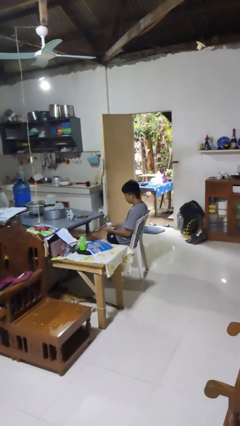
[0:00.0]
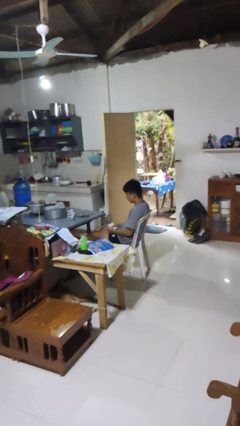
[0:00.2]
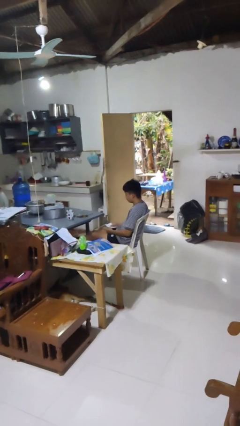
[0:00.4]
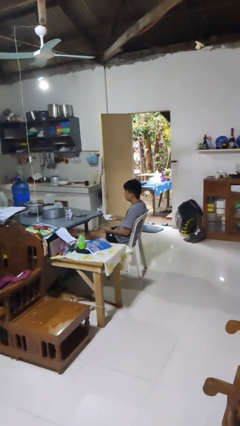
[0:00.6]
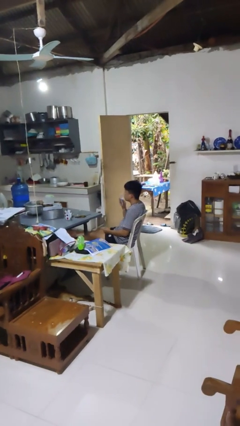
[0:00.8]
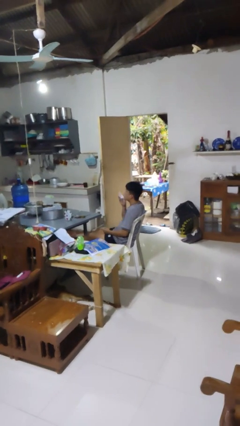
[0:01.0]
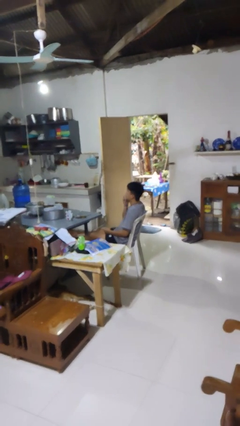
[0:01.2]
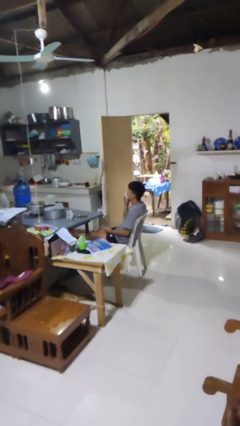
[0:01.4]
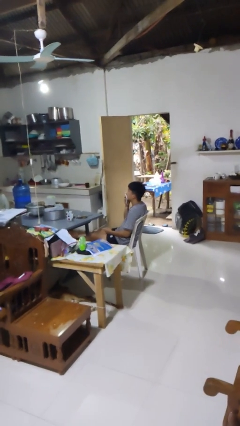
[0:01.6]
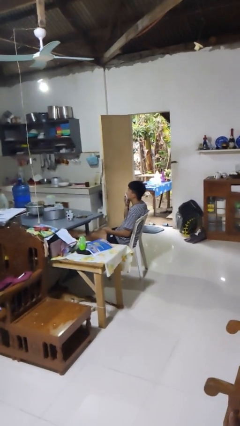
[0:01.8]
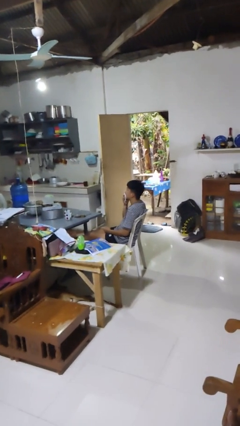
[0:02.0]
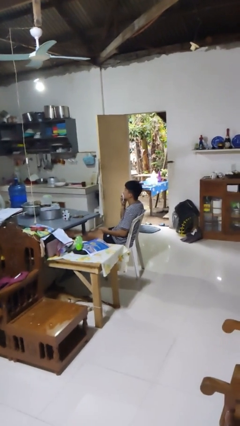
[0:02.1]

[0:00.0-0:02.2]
person wipes mouth with napkin

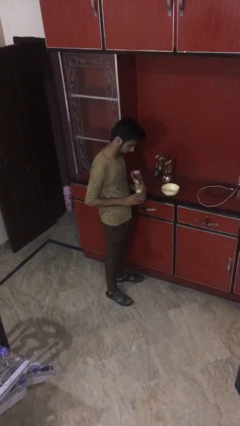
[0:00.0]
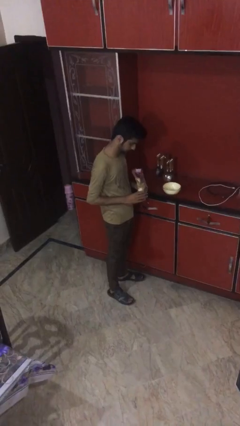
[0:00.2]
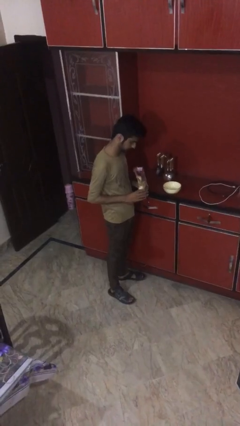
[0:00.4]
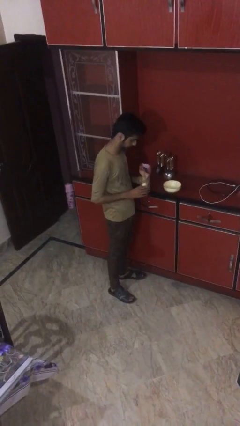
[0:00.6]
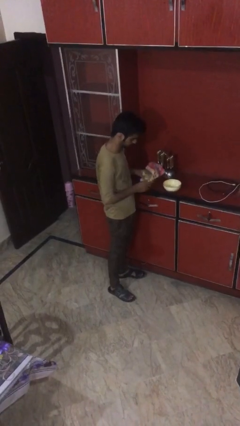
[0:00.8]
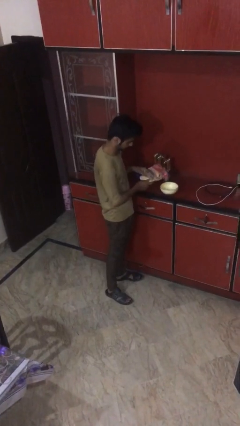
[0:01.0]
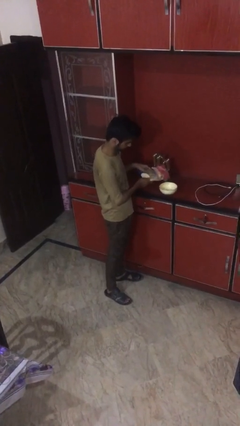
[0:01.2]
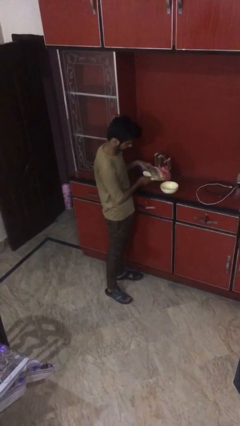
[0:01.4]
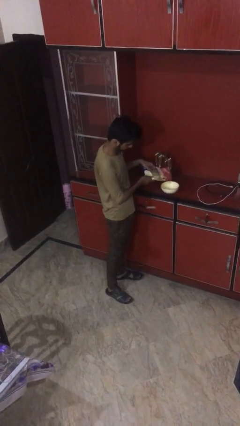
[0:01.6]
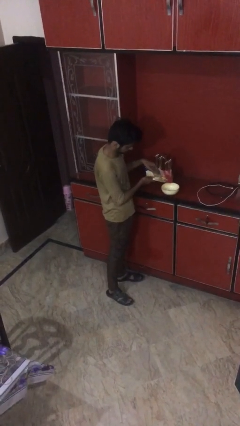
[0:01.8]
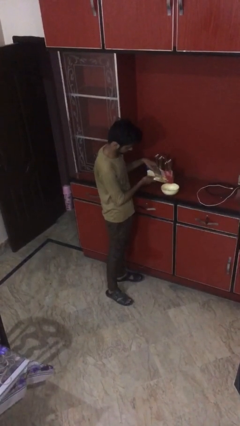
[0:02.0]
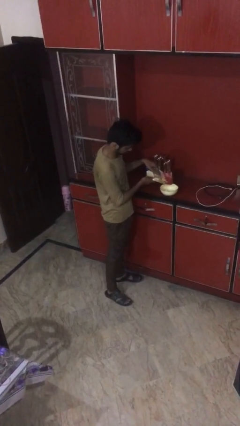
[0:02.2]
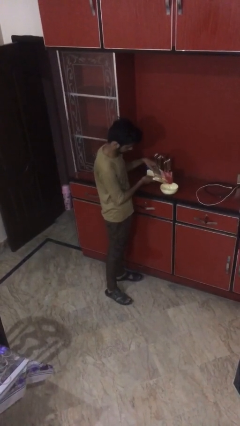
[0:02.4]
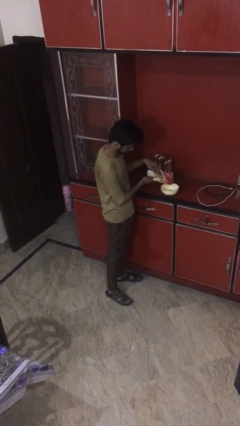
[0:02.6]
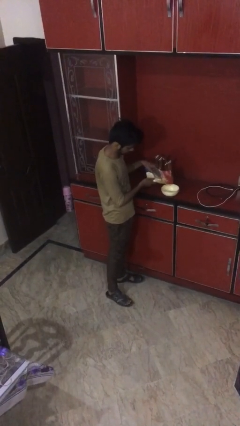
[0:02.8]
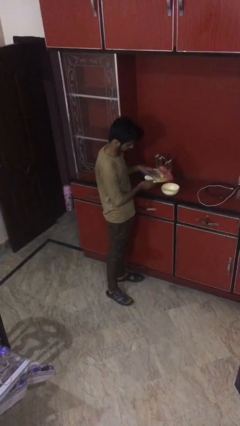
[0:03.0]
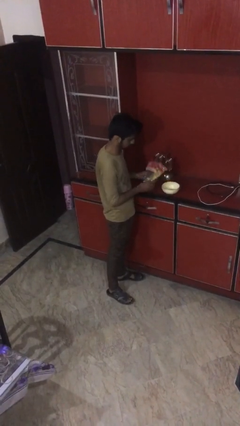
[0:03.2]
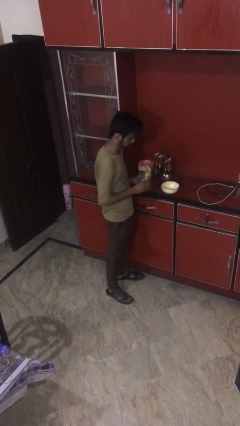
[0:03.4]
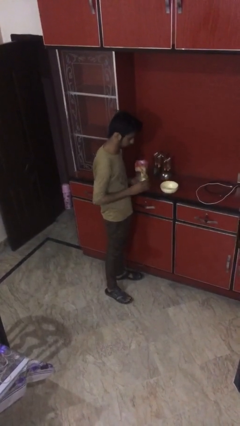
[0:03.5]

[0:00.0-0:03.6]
person pours into bowl

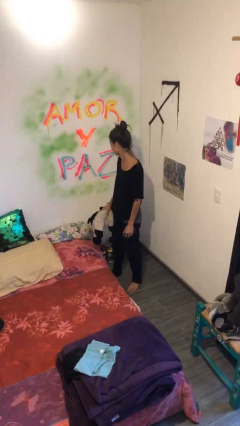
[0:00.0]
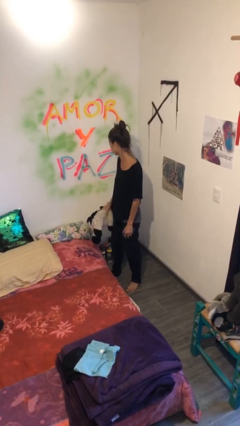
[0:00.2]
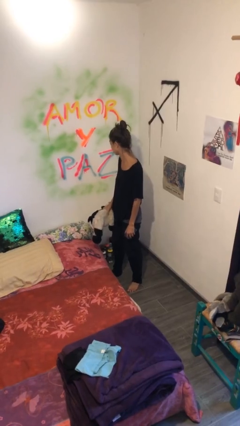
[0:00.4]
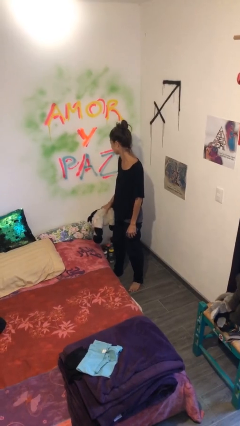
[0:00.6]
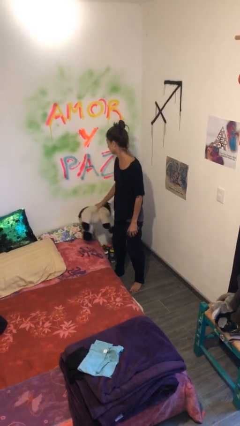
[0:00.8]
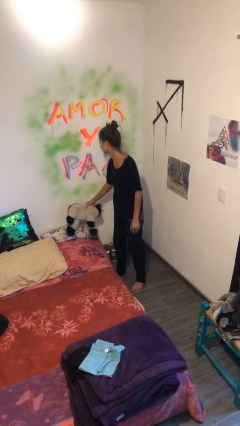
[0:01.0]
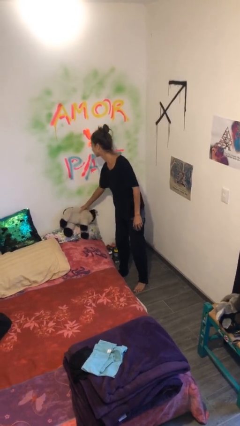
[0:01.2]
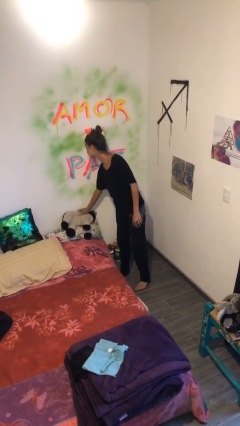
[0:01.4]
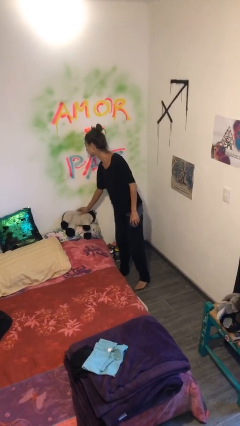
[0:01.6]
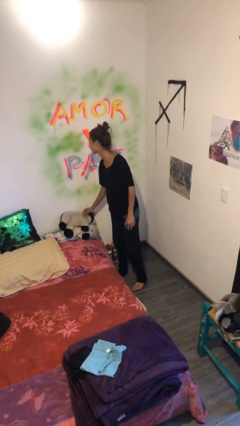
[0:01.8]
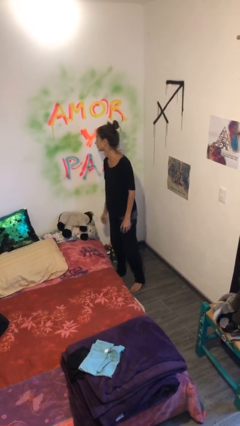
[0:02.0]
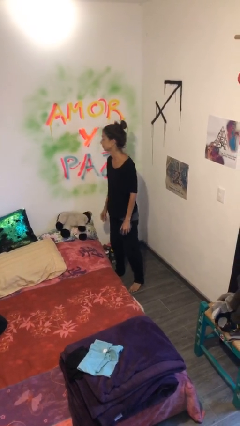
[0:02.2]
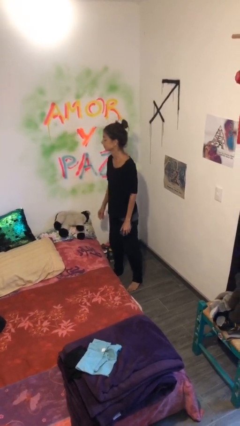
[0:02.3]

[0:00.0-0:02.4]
person puts down object on bed

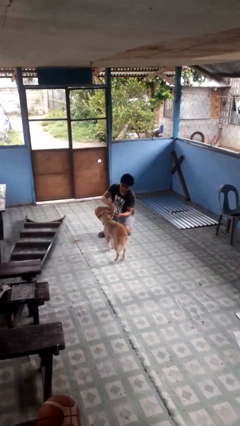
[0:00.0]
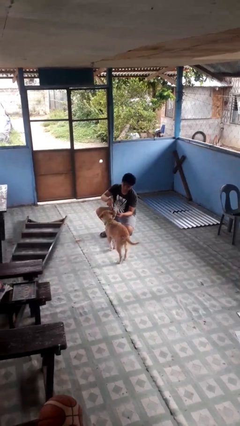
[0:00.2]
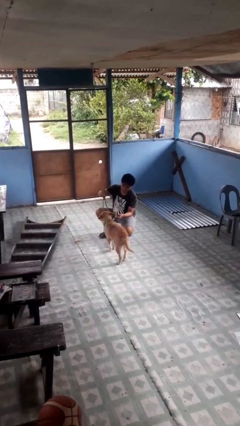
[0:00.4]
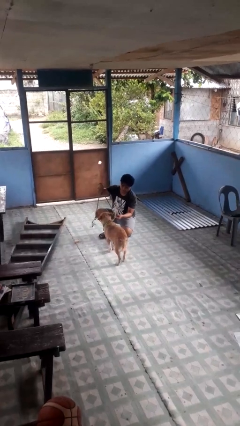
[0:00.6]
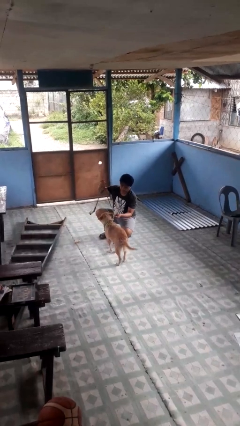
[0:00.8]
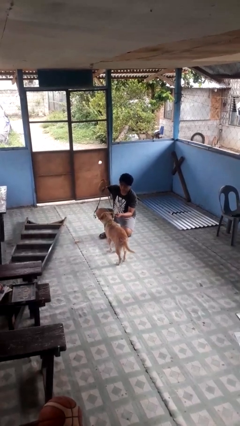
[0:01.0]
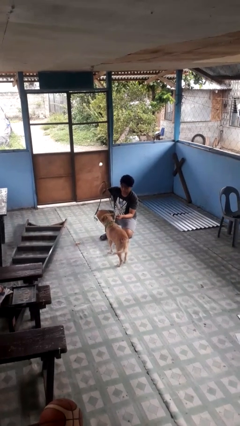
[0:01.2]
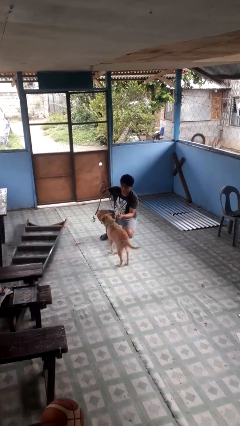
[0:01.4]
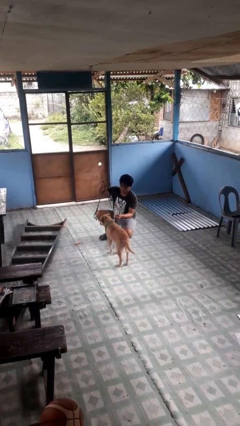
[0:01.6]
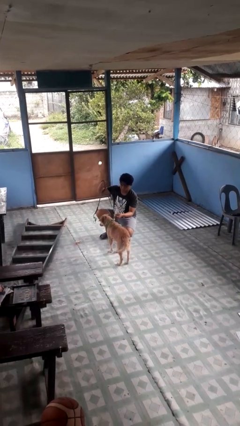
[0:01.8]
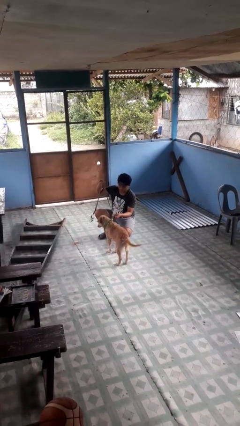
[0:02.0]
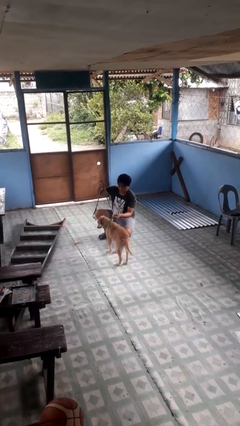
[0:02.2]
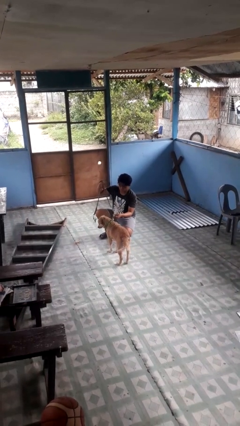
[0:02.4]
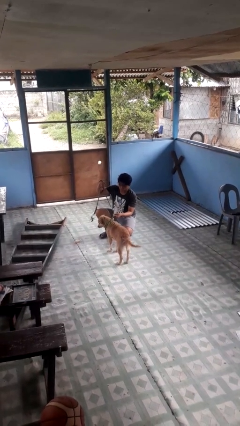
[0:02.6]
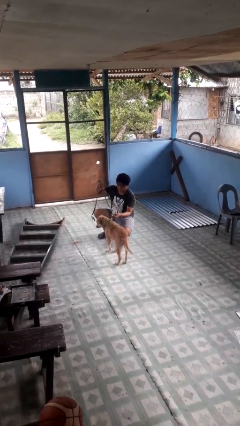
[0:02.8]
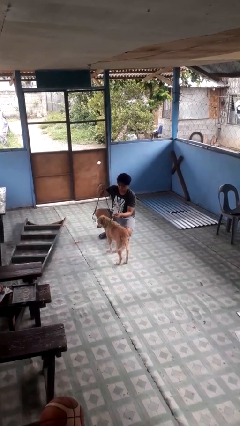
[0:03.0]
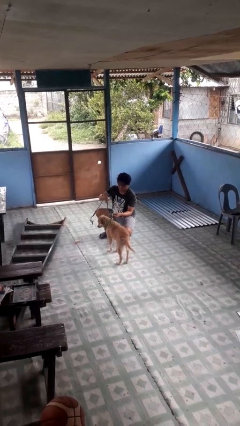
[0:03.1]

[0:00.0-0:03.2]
person attaches leash to dog

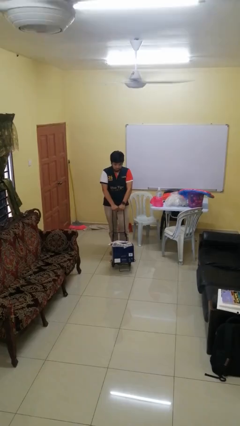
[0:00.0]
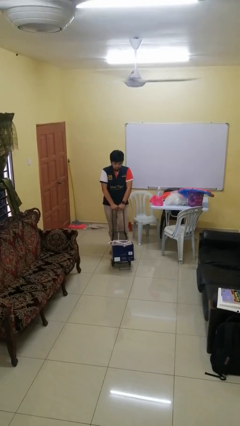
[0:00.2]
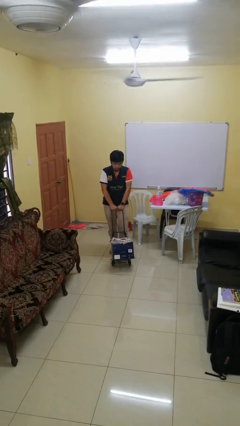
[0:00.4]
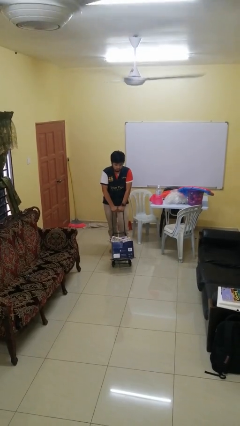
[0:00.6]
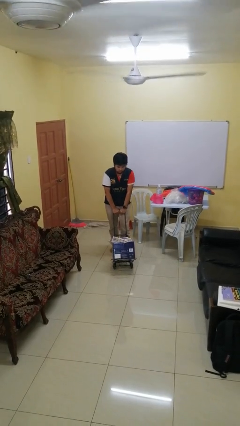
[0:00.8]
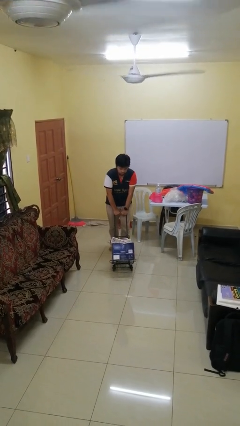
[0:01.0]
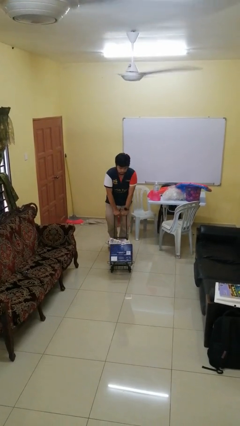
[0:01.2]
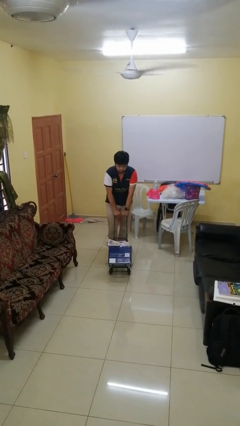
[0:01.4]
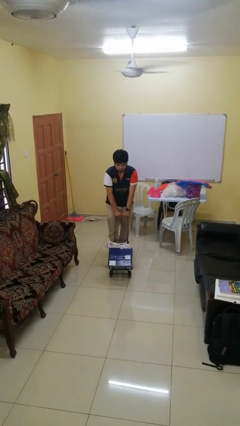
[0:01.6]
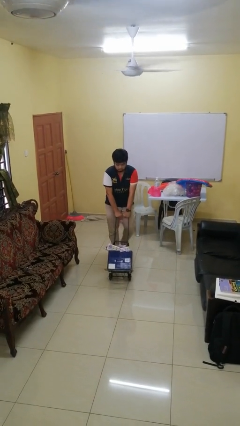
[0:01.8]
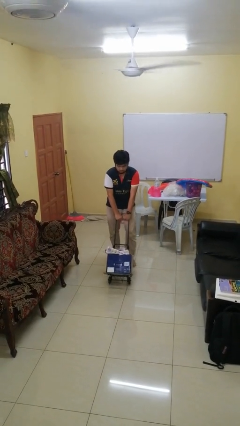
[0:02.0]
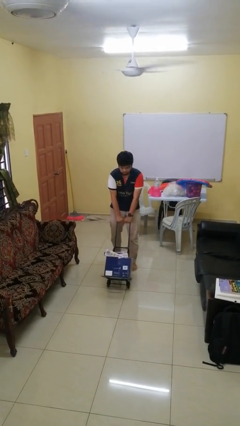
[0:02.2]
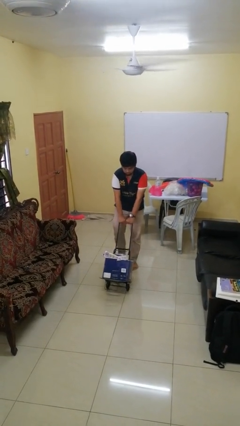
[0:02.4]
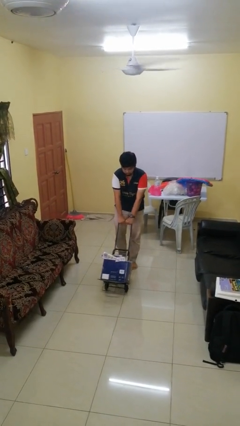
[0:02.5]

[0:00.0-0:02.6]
person pushes wheeled cart

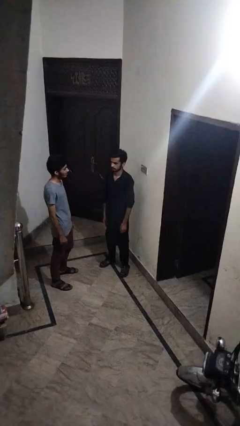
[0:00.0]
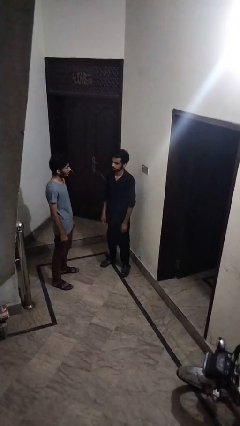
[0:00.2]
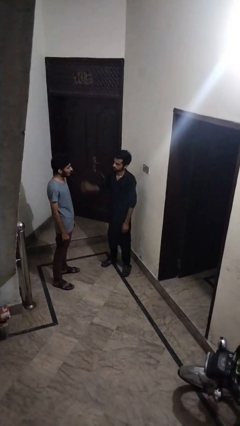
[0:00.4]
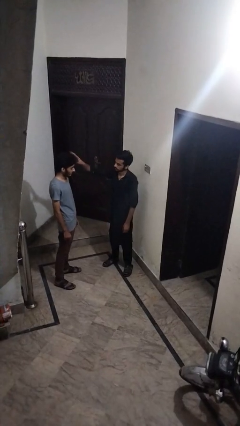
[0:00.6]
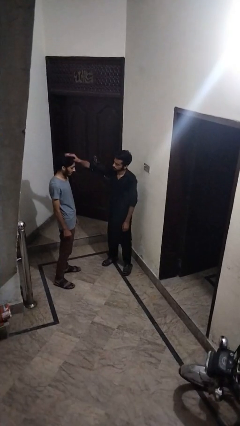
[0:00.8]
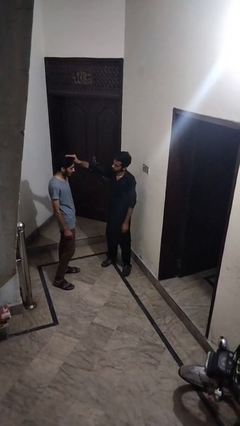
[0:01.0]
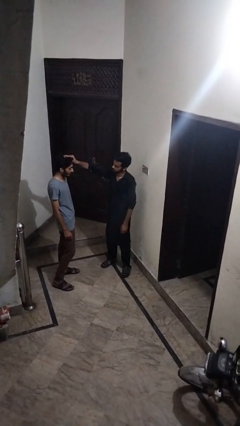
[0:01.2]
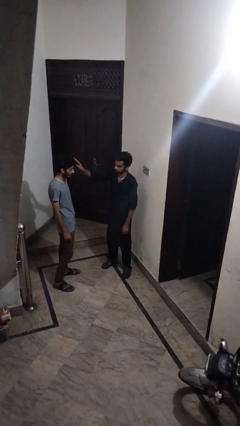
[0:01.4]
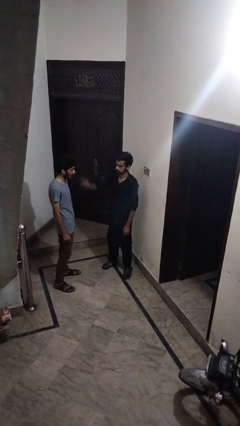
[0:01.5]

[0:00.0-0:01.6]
person grabs person by hair

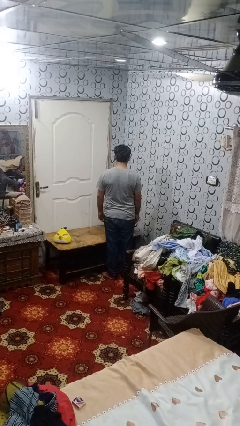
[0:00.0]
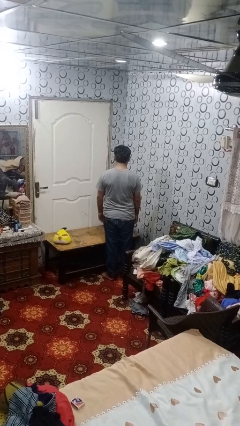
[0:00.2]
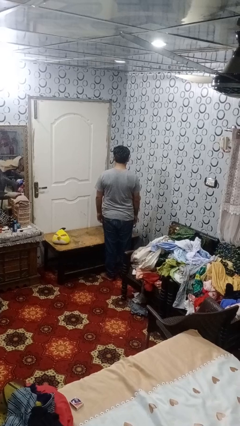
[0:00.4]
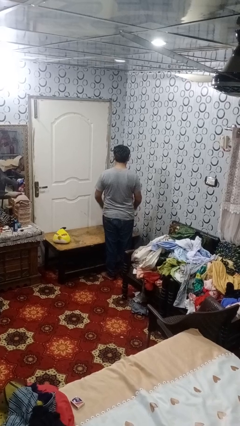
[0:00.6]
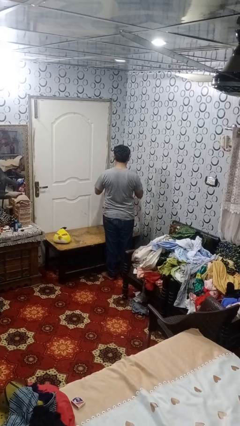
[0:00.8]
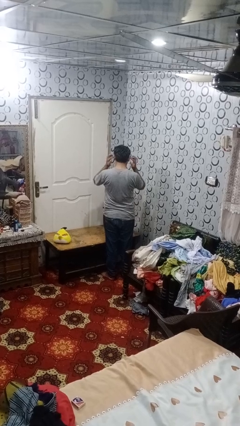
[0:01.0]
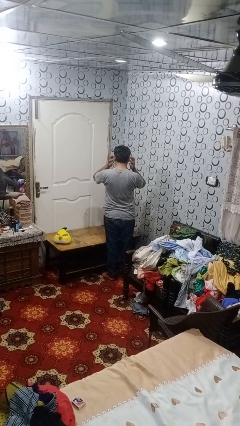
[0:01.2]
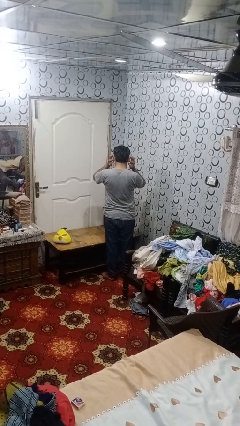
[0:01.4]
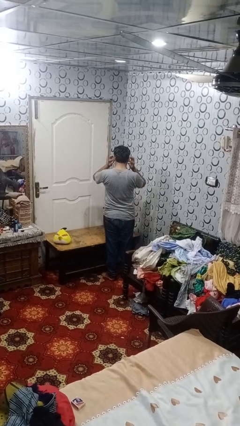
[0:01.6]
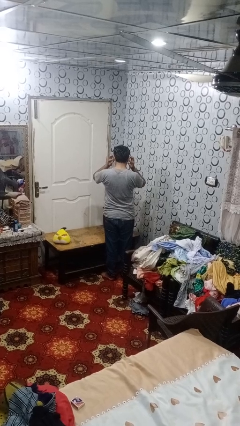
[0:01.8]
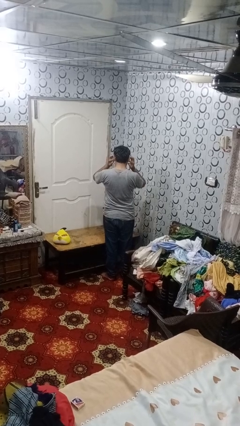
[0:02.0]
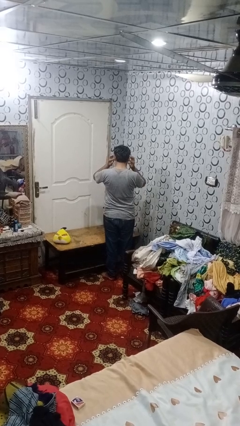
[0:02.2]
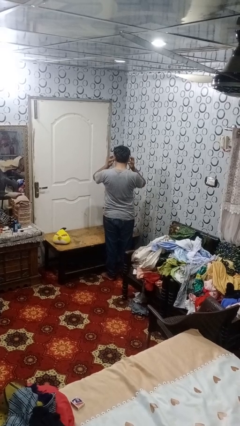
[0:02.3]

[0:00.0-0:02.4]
person puts fingers in ear
